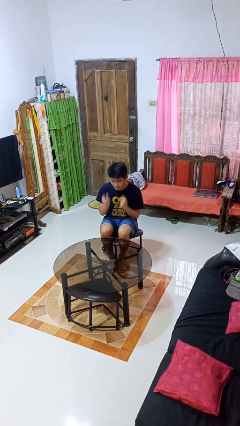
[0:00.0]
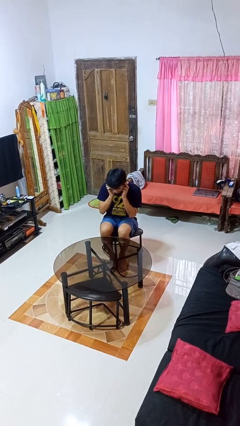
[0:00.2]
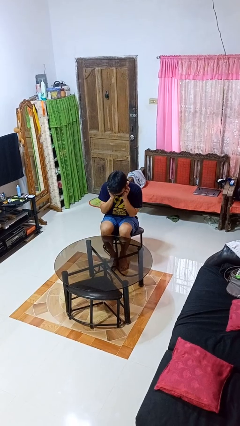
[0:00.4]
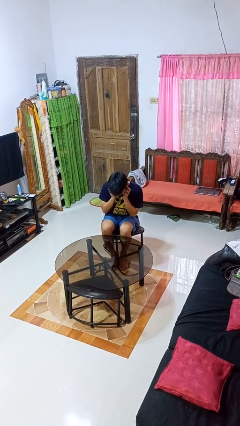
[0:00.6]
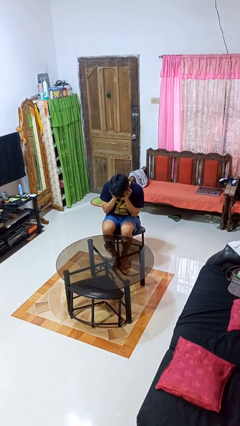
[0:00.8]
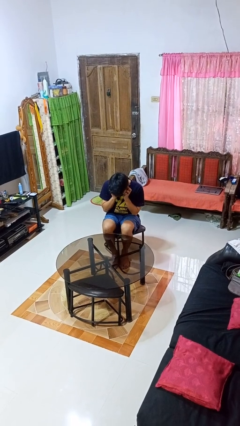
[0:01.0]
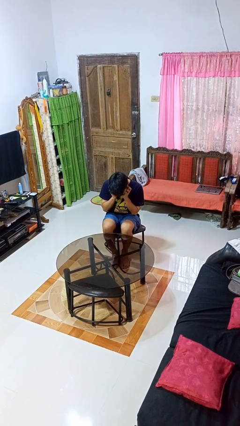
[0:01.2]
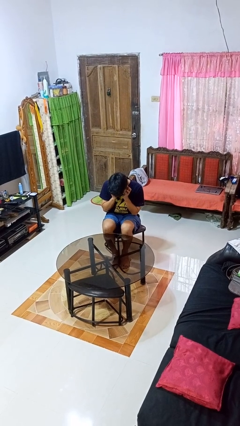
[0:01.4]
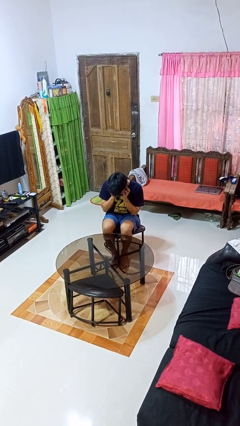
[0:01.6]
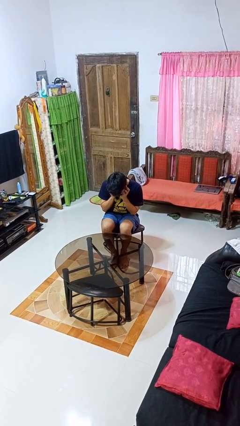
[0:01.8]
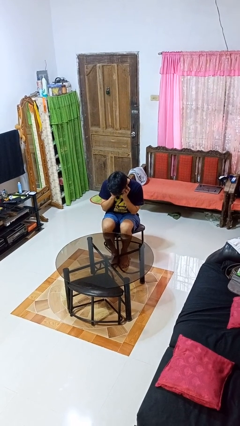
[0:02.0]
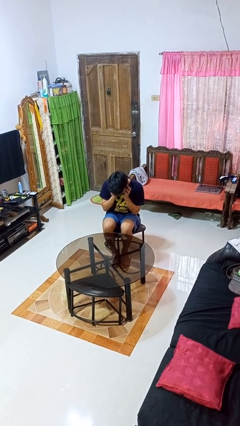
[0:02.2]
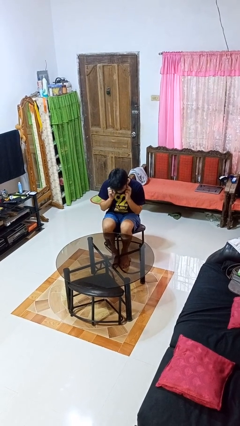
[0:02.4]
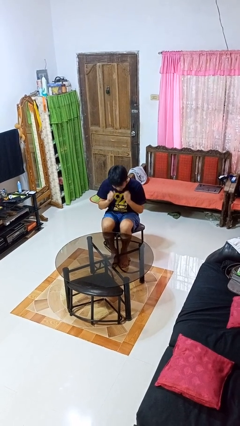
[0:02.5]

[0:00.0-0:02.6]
person puts fingers in ear

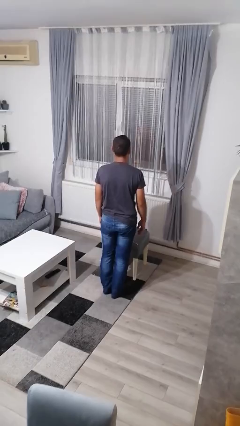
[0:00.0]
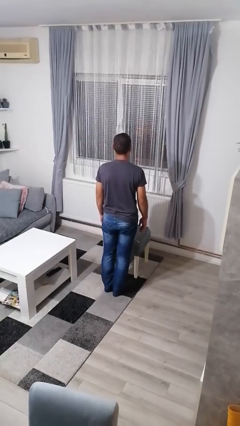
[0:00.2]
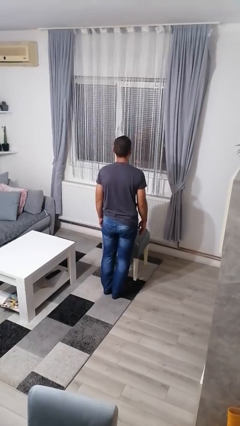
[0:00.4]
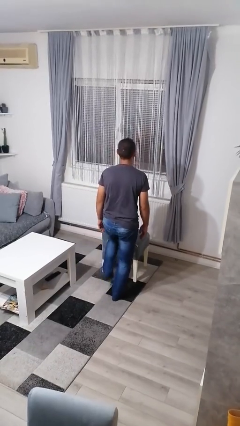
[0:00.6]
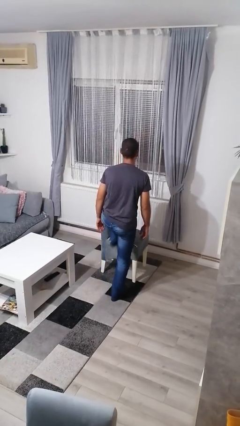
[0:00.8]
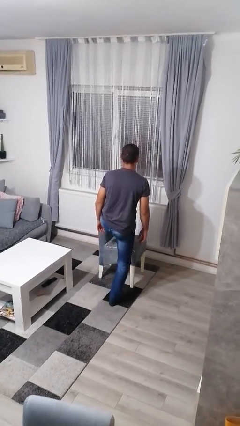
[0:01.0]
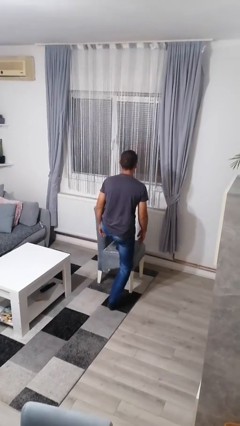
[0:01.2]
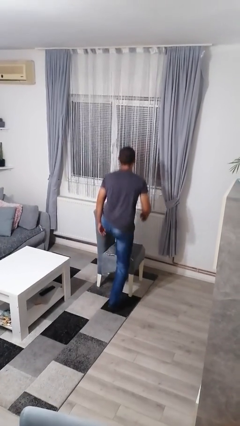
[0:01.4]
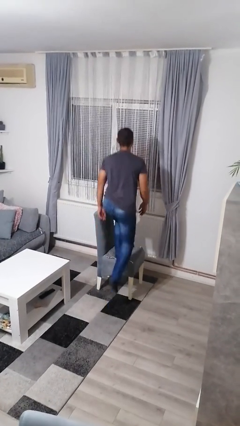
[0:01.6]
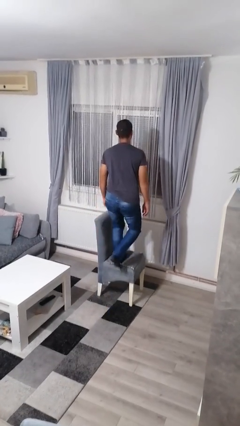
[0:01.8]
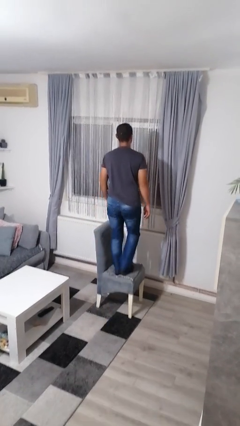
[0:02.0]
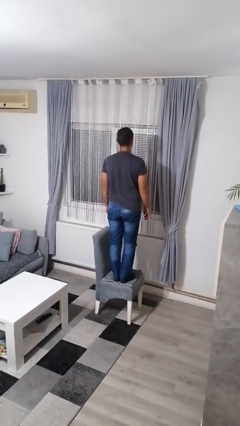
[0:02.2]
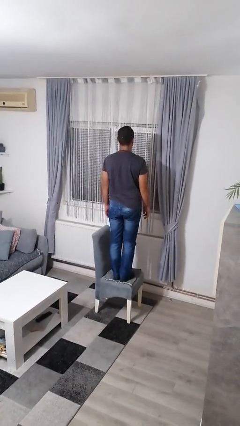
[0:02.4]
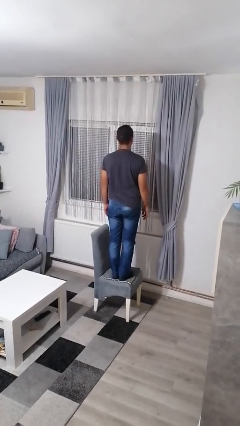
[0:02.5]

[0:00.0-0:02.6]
person climbs on chair

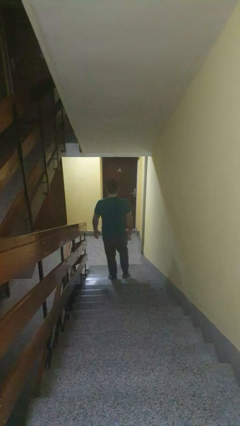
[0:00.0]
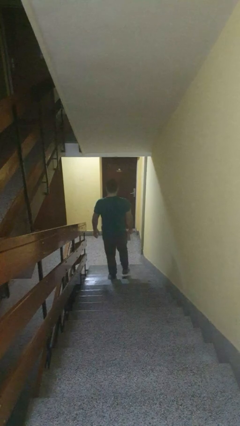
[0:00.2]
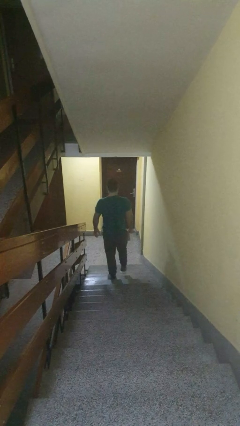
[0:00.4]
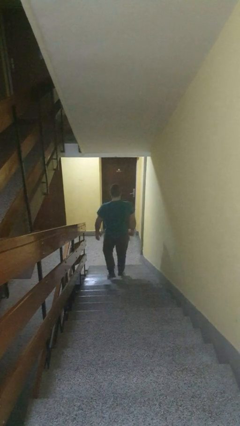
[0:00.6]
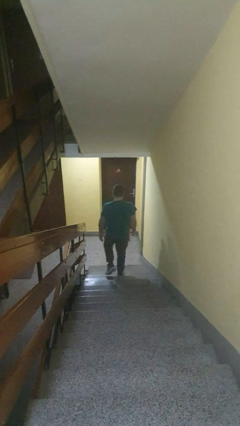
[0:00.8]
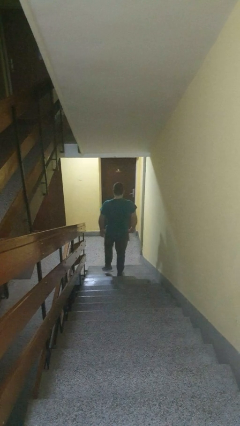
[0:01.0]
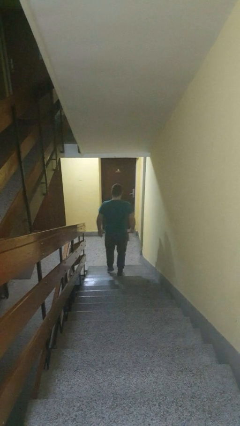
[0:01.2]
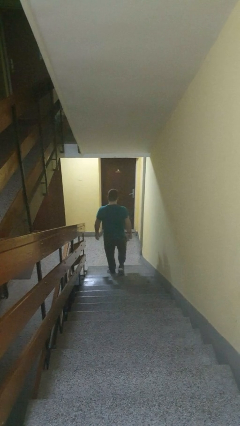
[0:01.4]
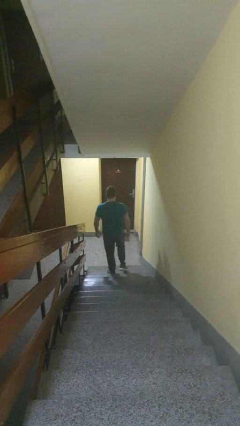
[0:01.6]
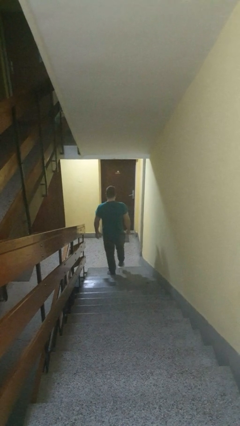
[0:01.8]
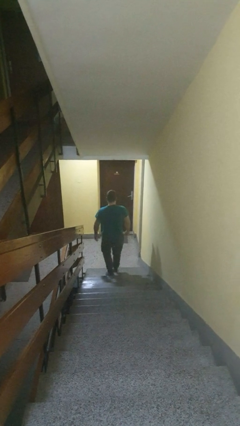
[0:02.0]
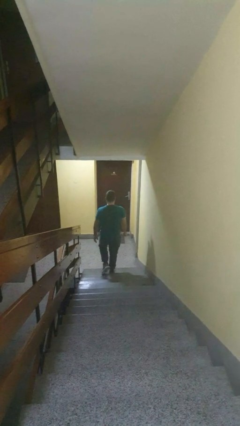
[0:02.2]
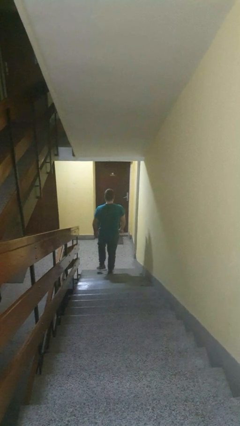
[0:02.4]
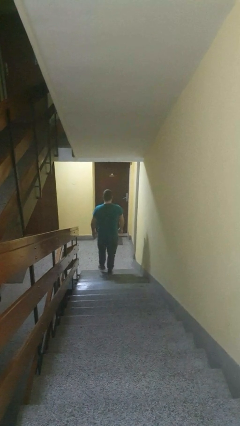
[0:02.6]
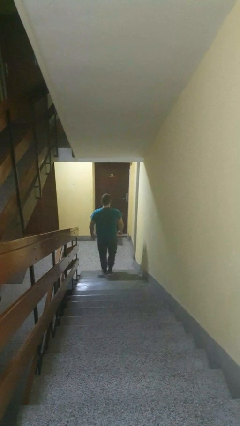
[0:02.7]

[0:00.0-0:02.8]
person climbs down stairs

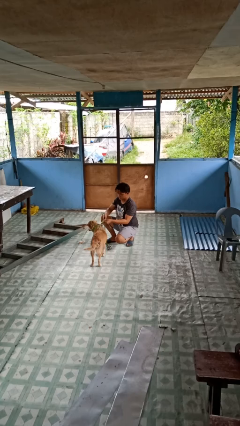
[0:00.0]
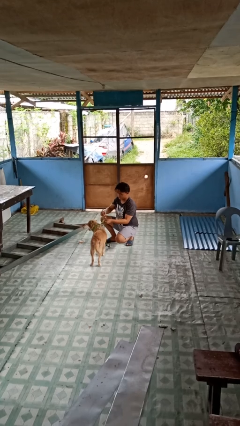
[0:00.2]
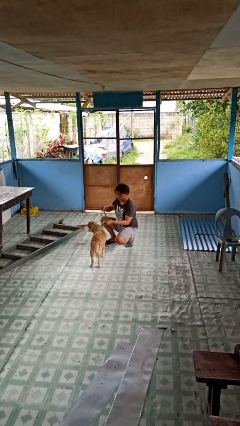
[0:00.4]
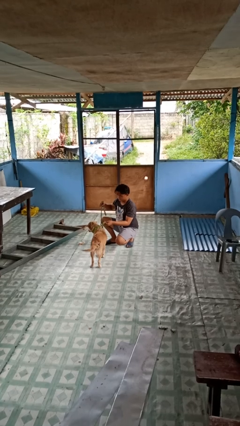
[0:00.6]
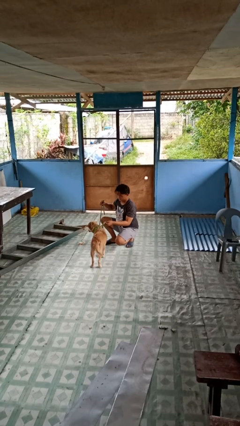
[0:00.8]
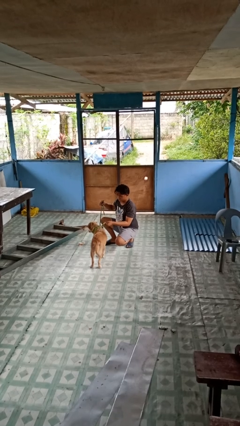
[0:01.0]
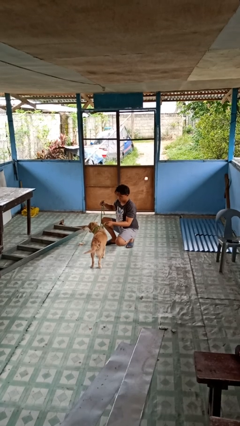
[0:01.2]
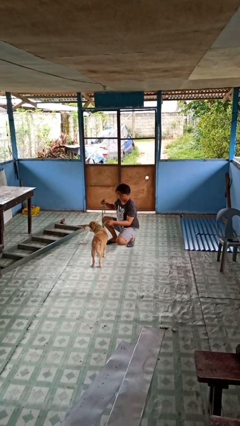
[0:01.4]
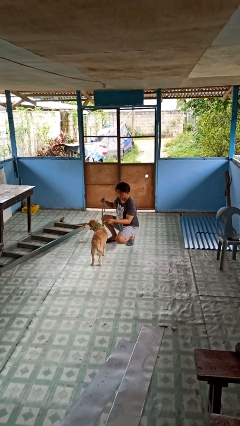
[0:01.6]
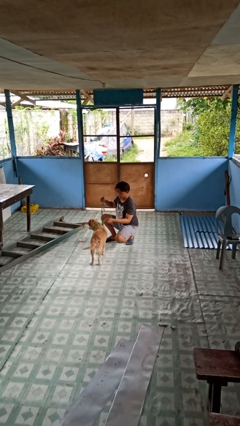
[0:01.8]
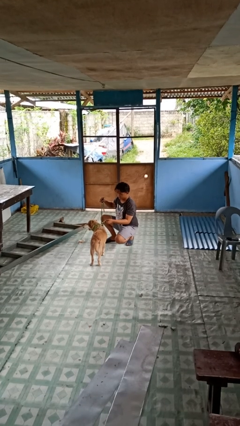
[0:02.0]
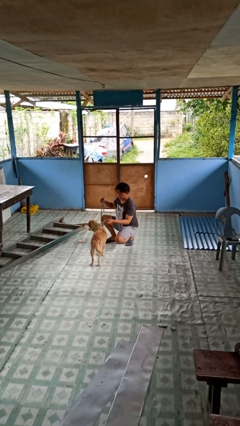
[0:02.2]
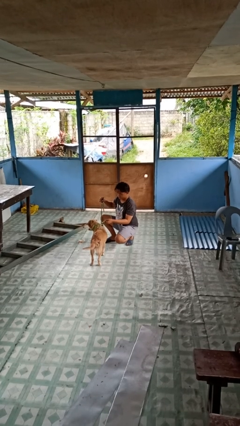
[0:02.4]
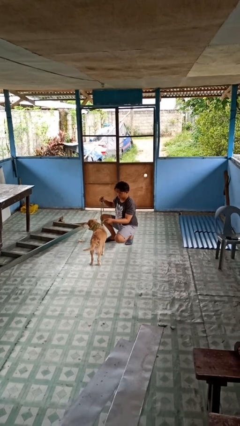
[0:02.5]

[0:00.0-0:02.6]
person unattaches leash from dog

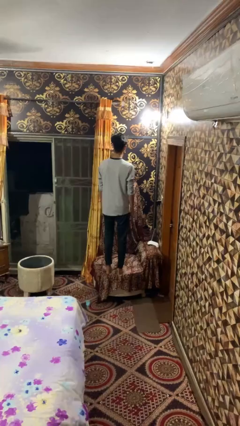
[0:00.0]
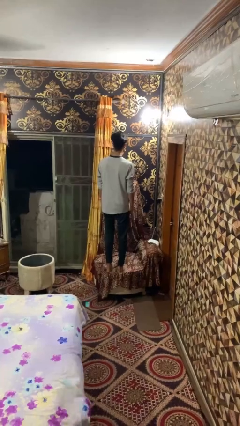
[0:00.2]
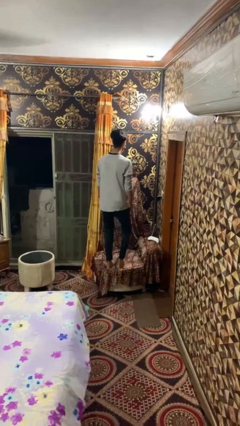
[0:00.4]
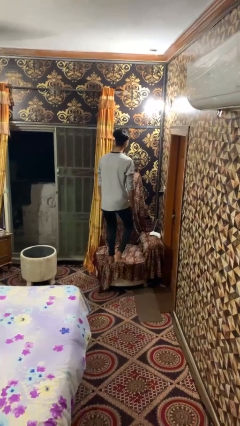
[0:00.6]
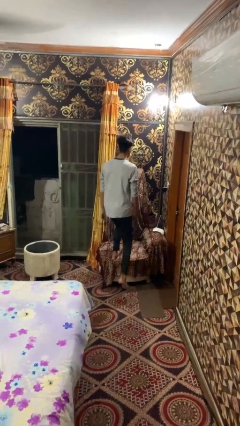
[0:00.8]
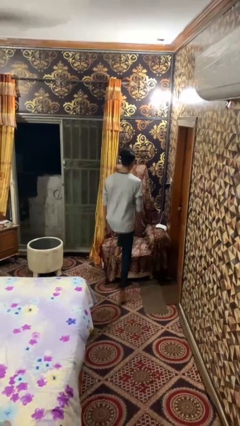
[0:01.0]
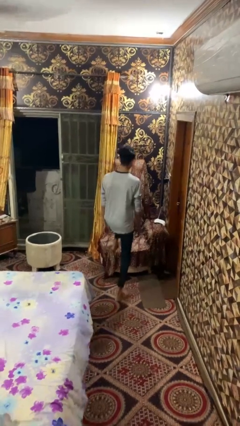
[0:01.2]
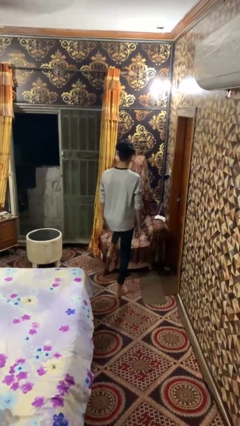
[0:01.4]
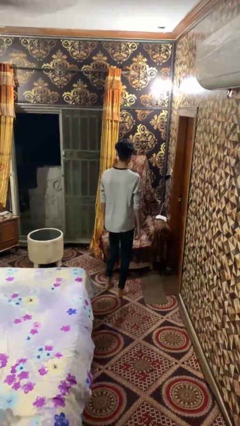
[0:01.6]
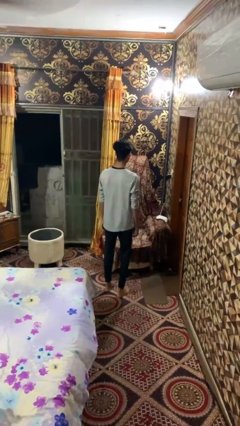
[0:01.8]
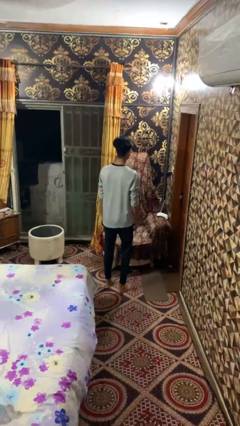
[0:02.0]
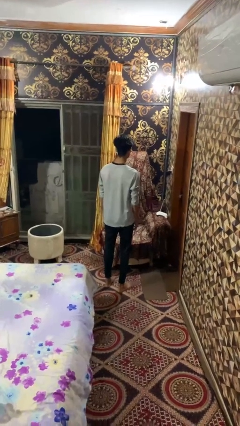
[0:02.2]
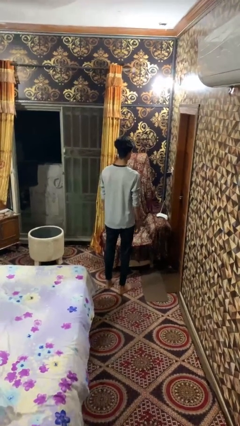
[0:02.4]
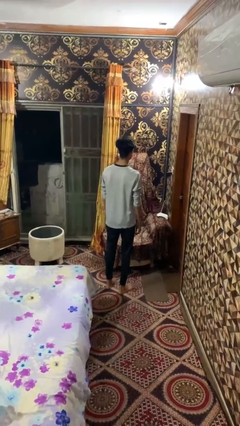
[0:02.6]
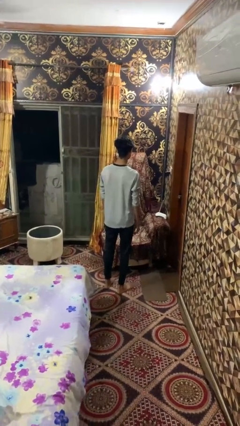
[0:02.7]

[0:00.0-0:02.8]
person climbs off couch

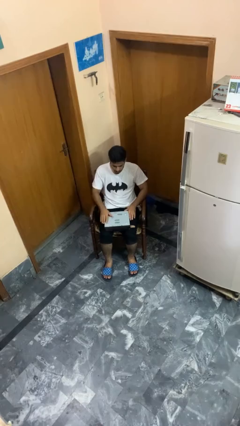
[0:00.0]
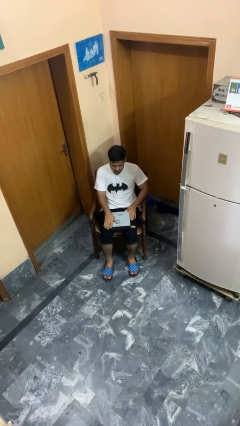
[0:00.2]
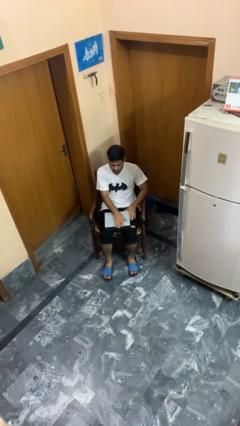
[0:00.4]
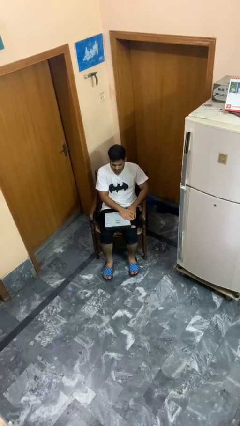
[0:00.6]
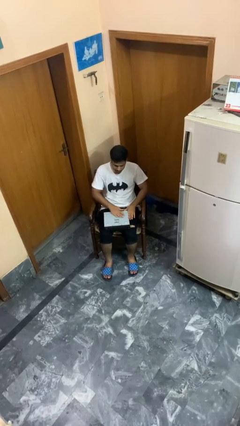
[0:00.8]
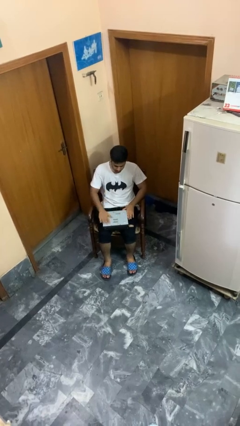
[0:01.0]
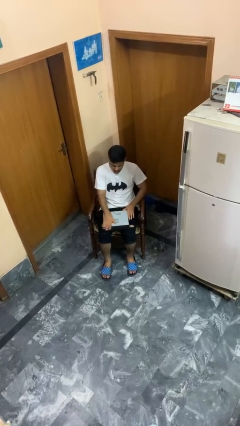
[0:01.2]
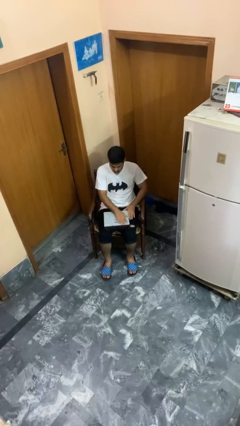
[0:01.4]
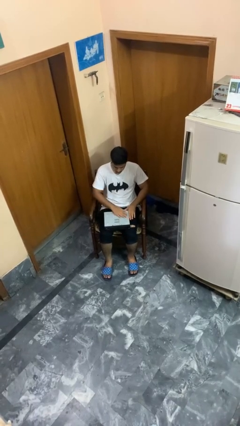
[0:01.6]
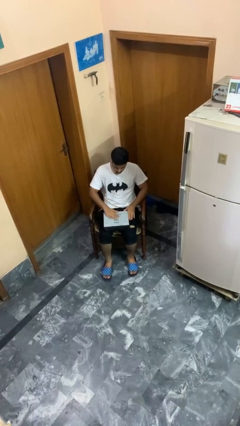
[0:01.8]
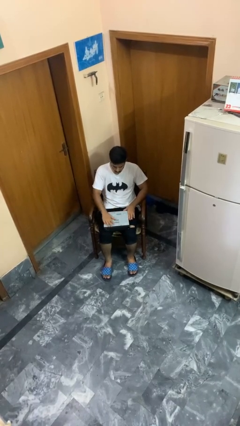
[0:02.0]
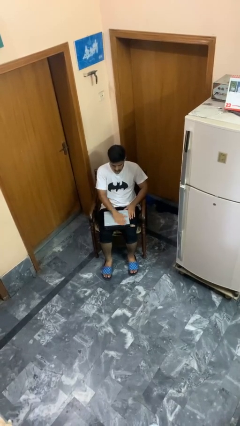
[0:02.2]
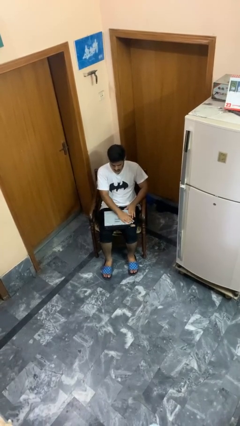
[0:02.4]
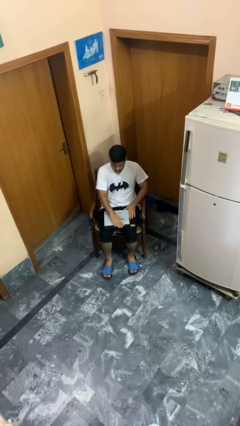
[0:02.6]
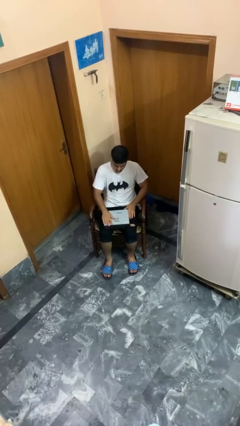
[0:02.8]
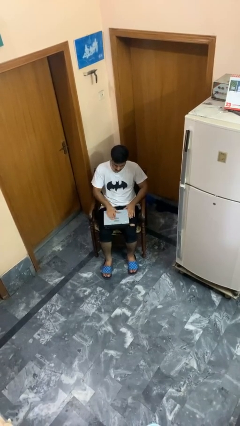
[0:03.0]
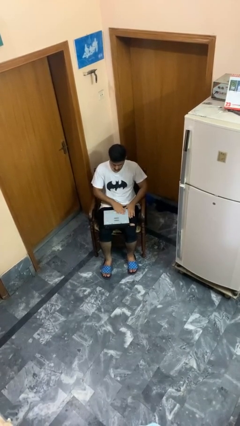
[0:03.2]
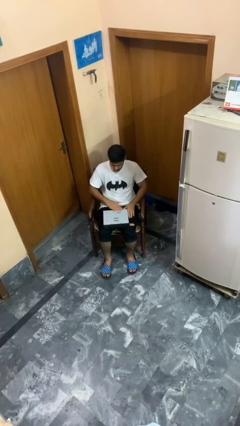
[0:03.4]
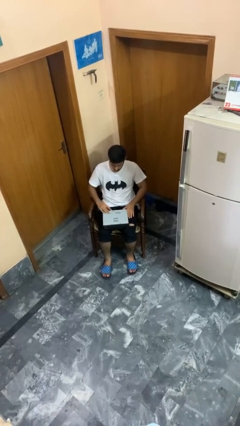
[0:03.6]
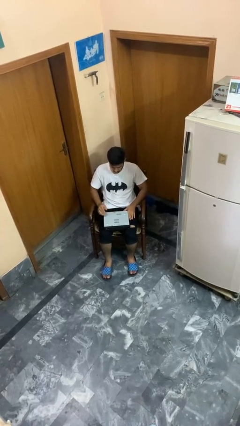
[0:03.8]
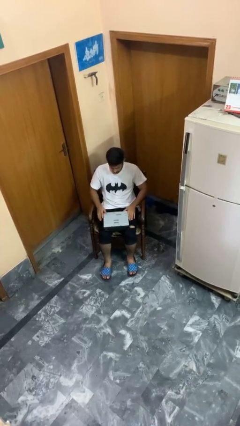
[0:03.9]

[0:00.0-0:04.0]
person waves hand over object
